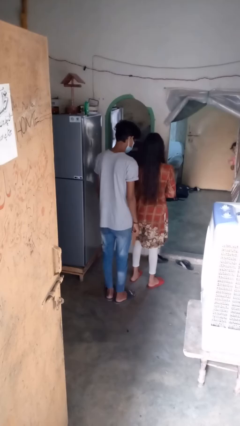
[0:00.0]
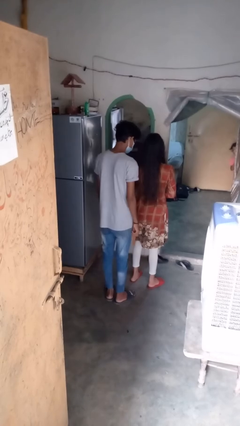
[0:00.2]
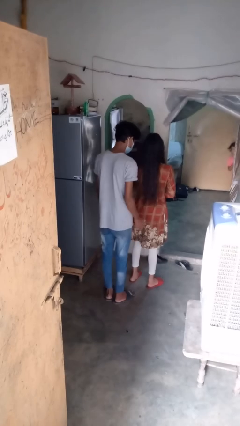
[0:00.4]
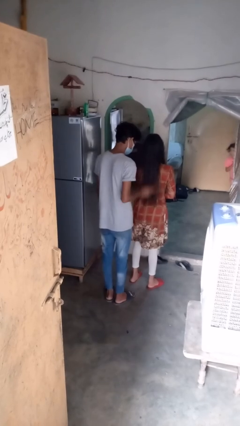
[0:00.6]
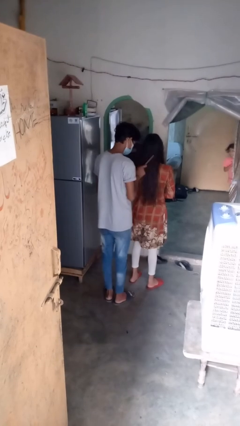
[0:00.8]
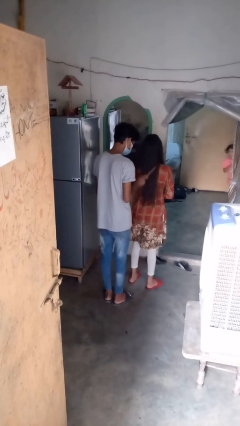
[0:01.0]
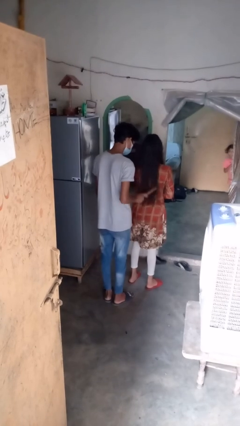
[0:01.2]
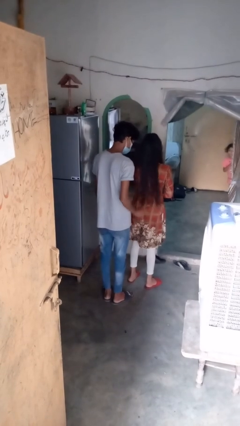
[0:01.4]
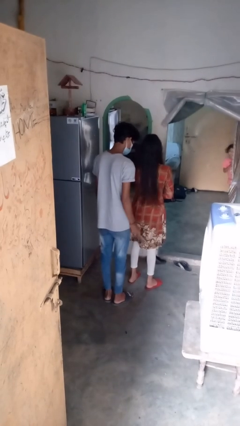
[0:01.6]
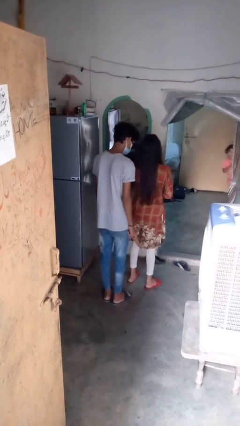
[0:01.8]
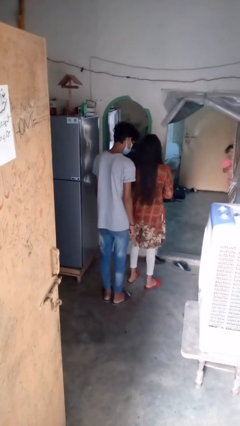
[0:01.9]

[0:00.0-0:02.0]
person brushes hair of person

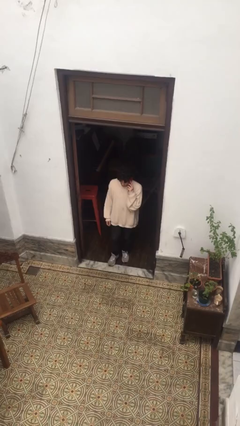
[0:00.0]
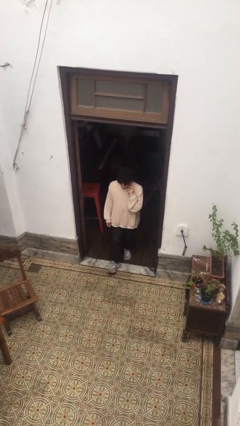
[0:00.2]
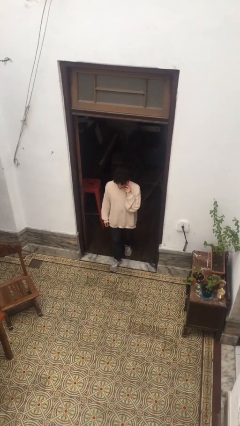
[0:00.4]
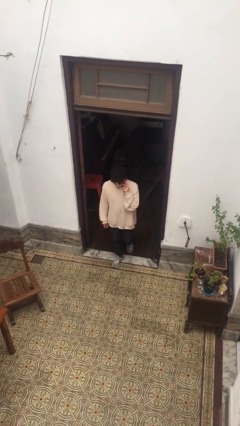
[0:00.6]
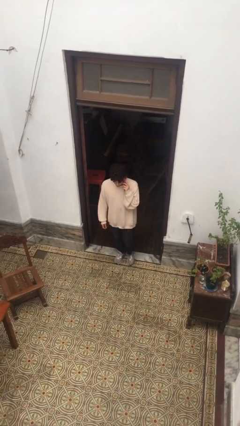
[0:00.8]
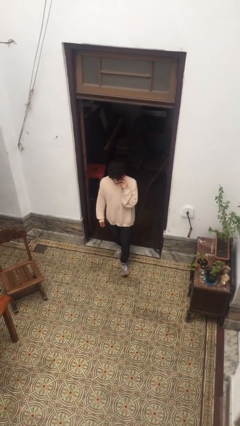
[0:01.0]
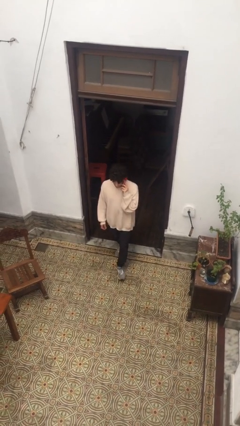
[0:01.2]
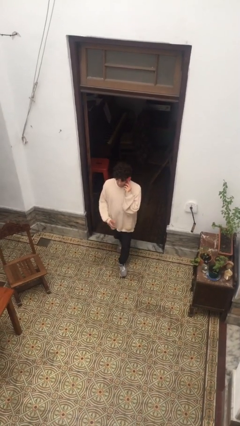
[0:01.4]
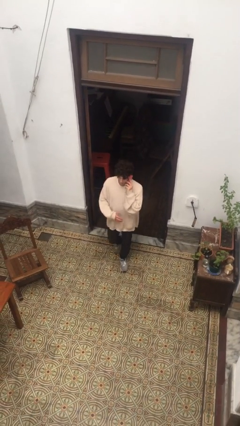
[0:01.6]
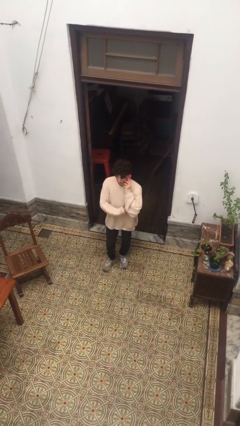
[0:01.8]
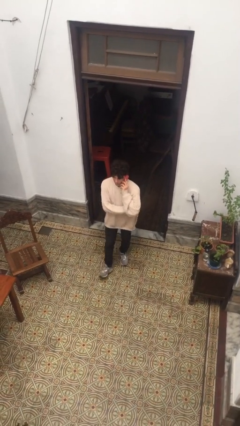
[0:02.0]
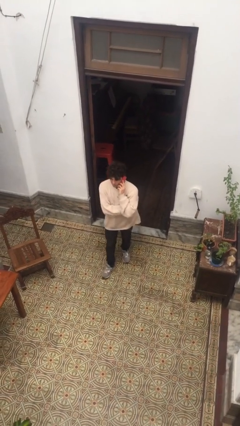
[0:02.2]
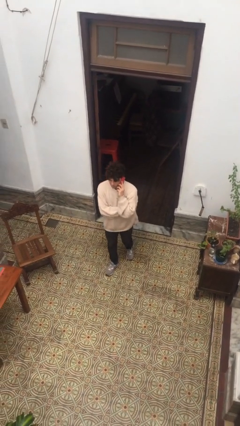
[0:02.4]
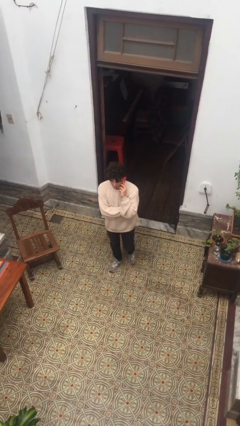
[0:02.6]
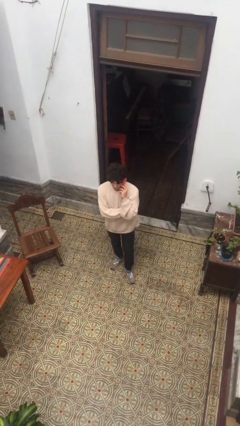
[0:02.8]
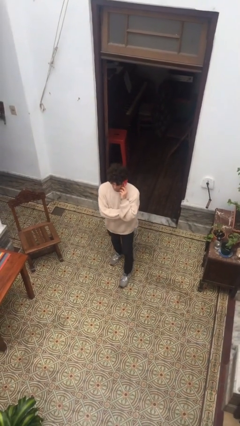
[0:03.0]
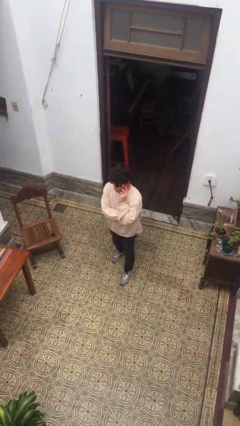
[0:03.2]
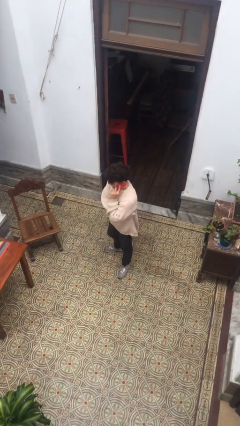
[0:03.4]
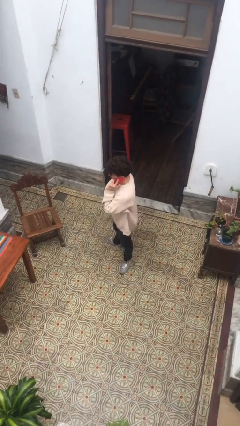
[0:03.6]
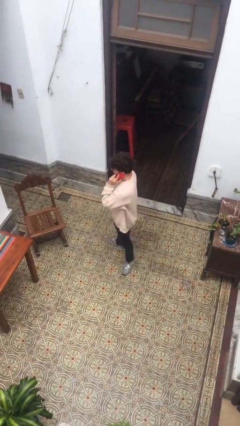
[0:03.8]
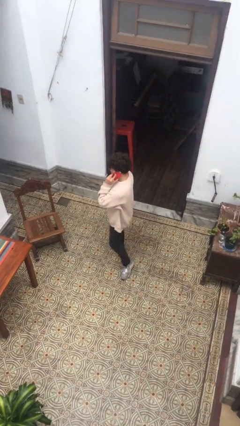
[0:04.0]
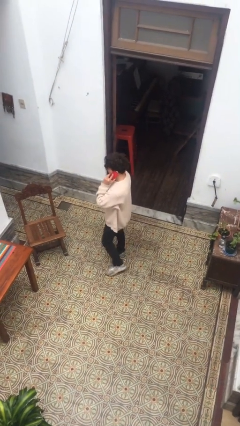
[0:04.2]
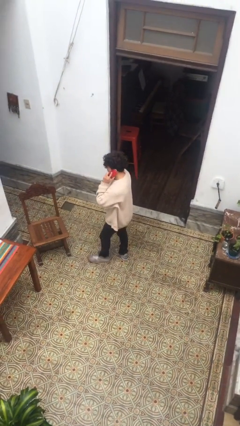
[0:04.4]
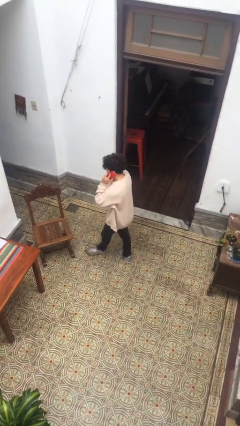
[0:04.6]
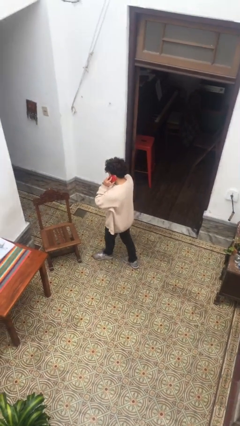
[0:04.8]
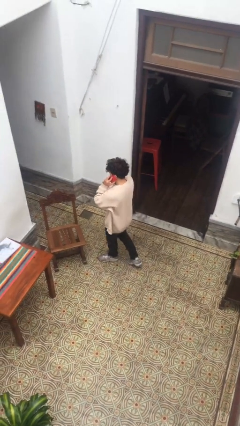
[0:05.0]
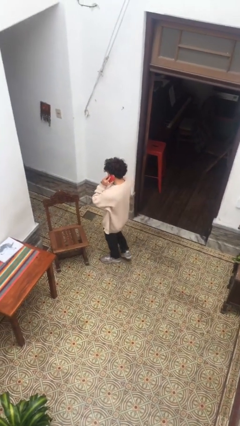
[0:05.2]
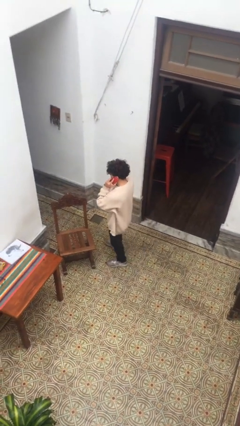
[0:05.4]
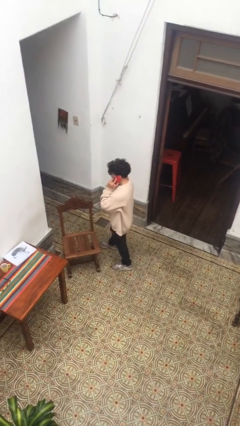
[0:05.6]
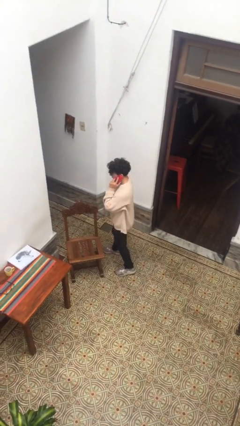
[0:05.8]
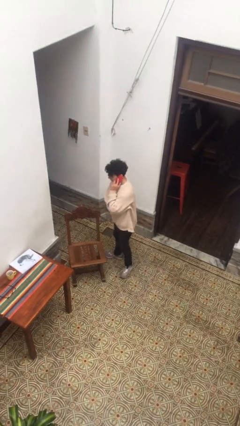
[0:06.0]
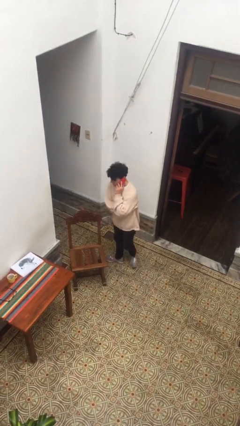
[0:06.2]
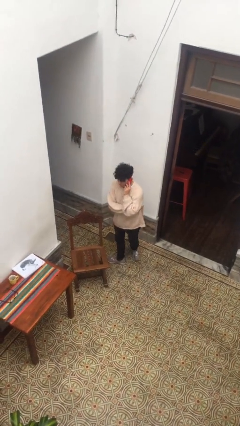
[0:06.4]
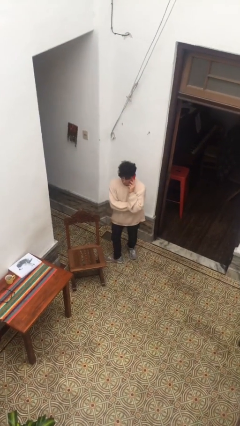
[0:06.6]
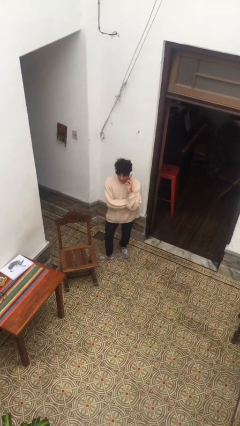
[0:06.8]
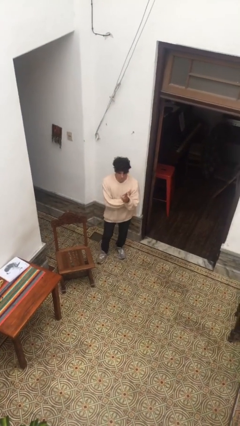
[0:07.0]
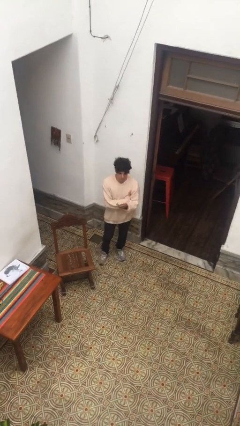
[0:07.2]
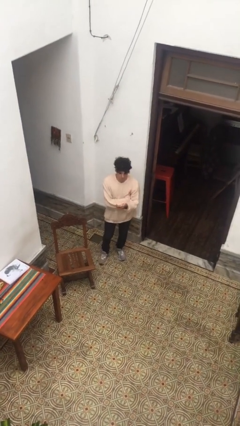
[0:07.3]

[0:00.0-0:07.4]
person enters scene through structure

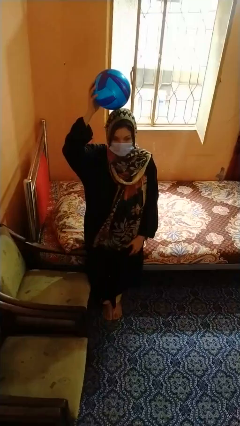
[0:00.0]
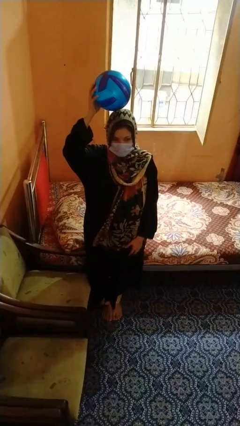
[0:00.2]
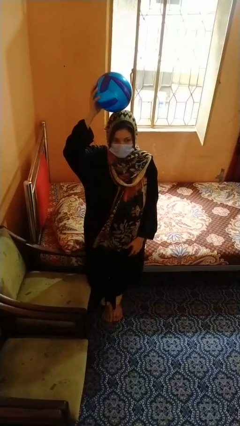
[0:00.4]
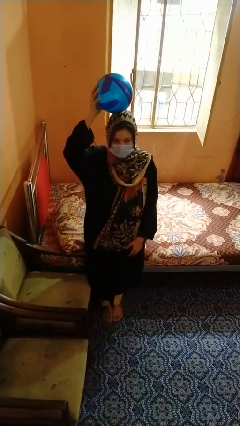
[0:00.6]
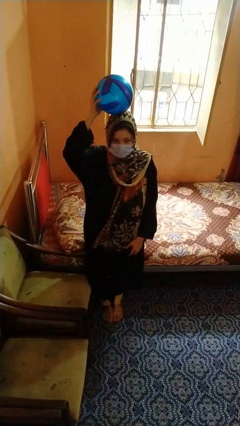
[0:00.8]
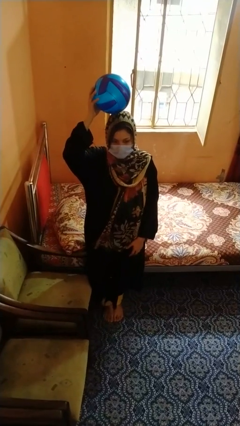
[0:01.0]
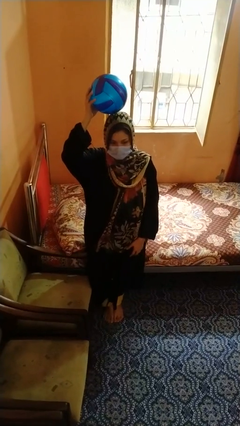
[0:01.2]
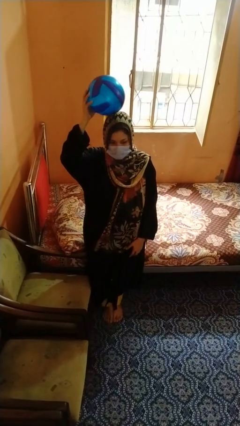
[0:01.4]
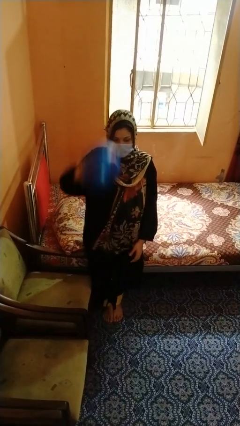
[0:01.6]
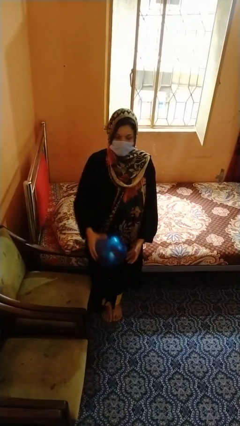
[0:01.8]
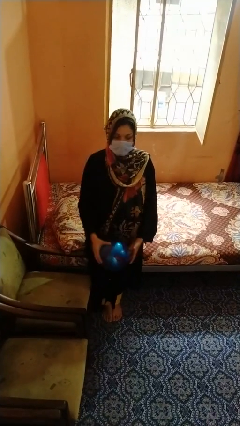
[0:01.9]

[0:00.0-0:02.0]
person holds object above head

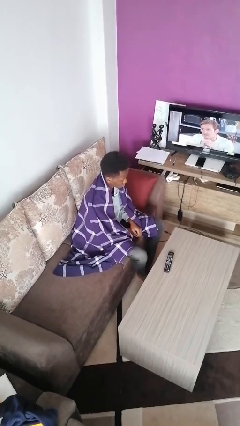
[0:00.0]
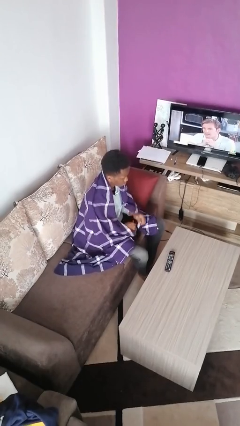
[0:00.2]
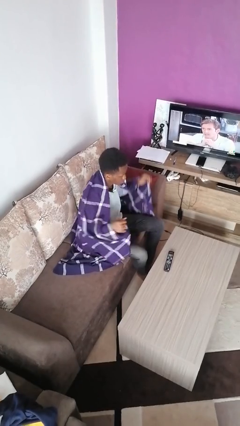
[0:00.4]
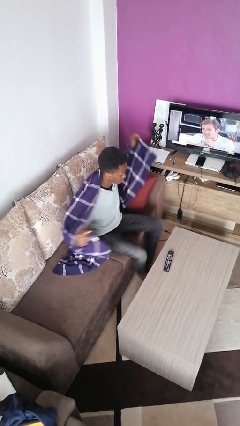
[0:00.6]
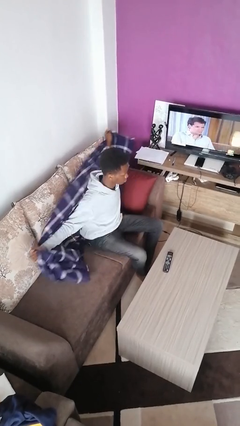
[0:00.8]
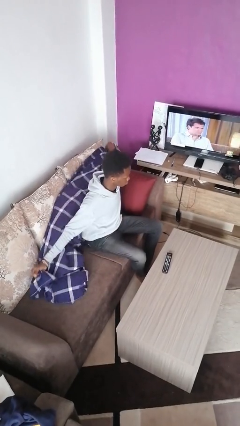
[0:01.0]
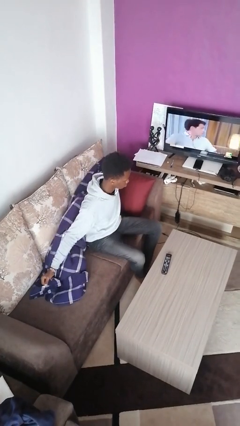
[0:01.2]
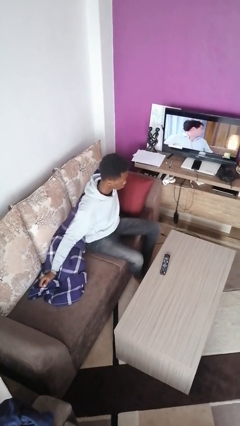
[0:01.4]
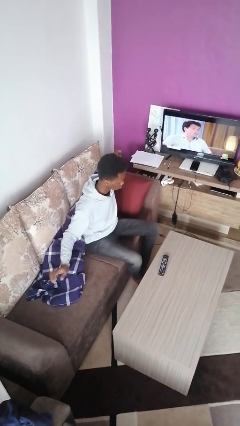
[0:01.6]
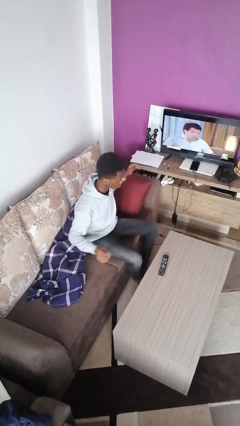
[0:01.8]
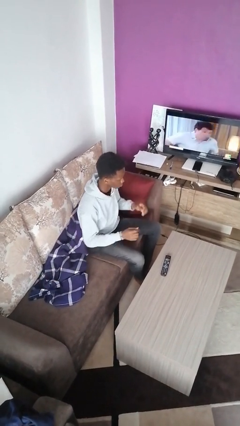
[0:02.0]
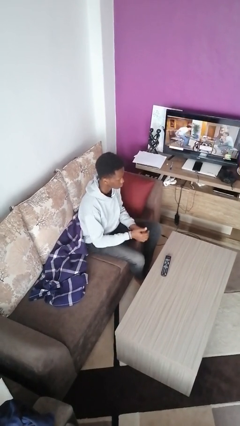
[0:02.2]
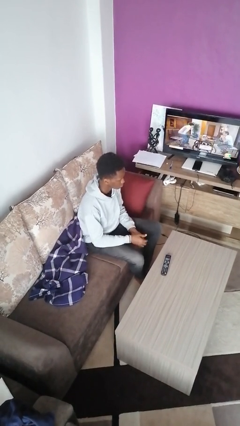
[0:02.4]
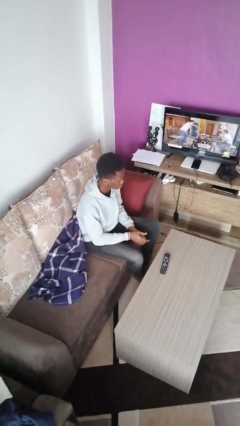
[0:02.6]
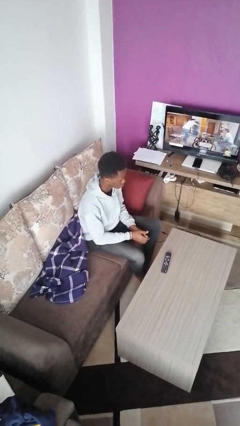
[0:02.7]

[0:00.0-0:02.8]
person uncovers with blanket

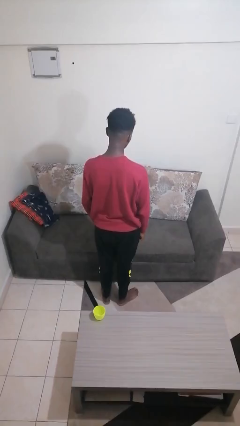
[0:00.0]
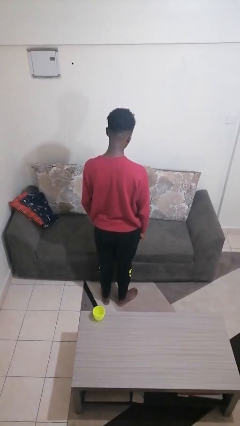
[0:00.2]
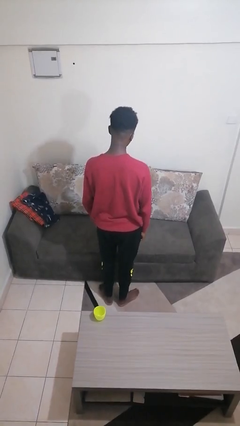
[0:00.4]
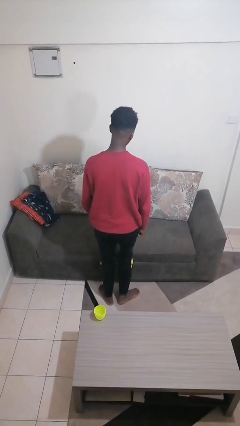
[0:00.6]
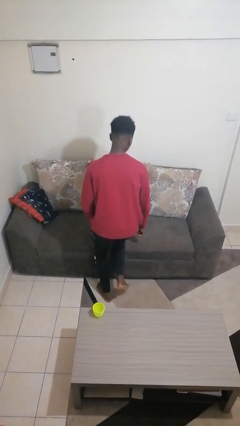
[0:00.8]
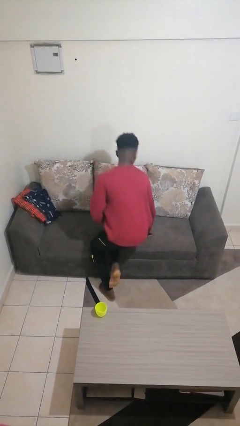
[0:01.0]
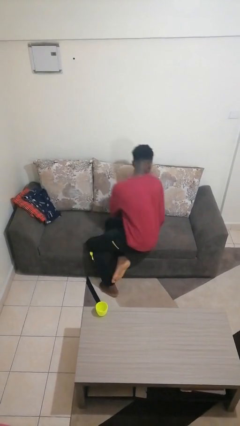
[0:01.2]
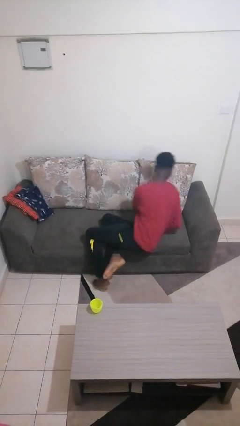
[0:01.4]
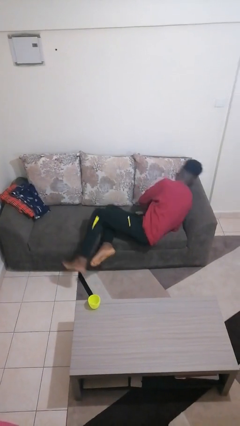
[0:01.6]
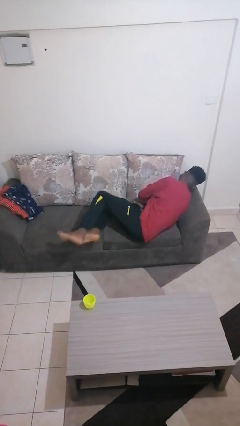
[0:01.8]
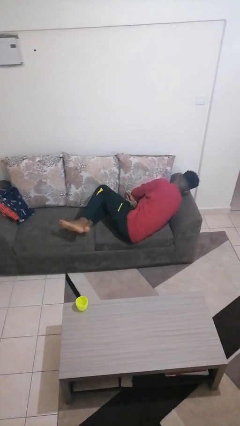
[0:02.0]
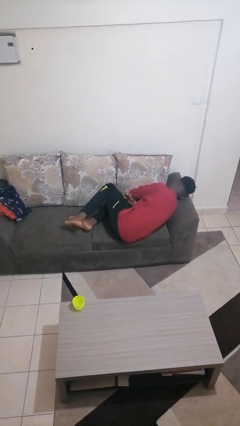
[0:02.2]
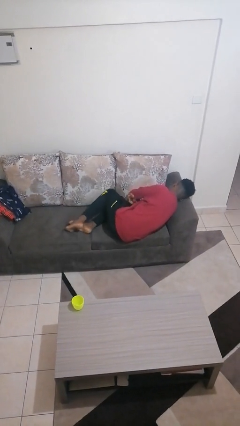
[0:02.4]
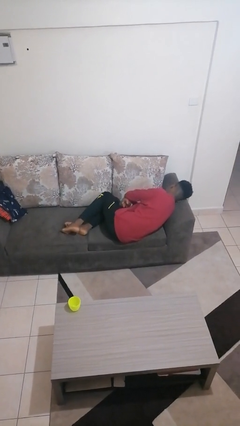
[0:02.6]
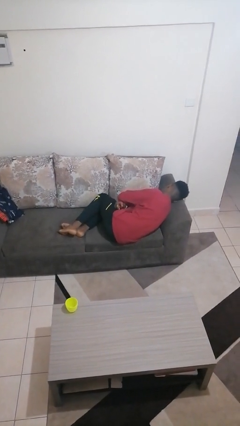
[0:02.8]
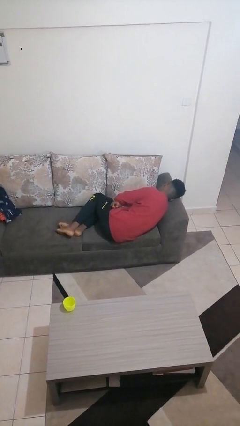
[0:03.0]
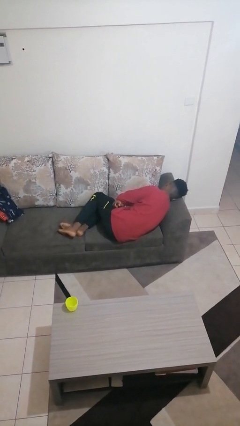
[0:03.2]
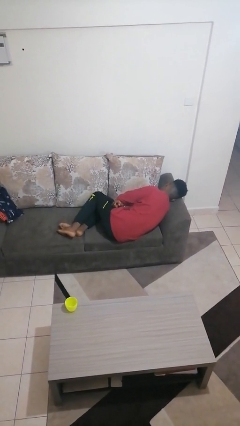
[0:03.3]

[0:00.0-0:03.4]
person lies down on couch
